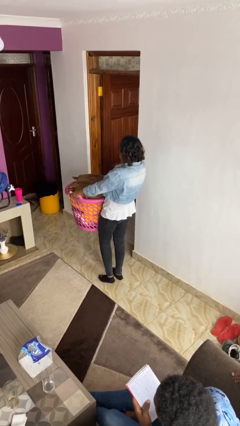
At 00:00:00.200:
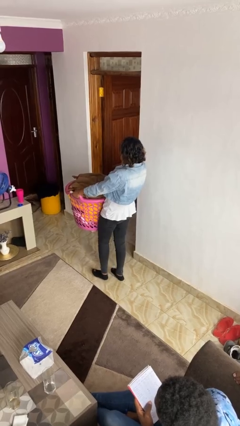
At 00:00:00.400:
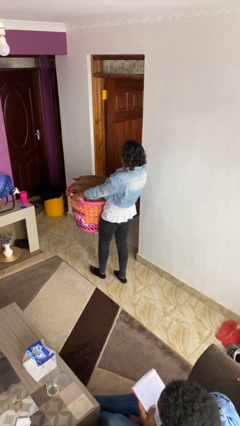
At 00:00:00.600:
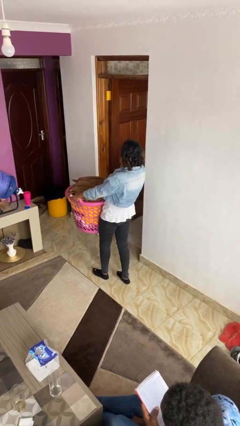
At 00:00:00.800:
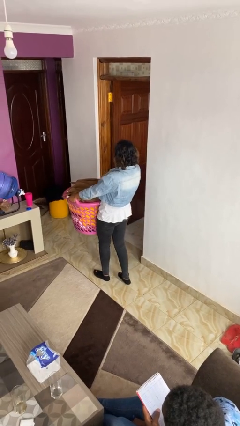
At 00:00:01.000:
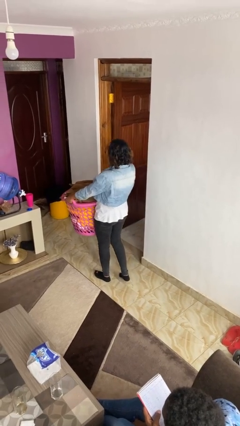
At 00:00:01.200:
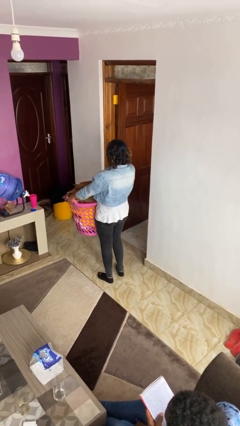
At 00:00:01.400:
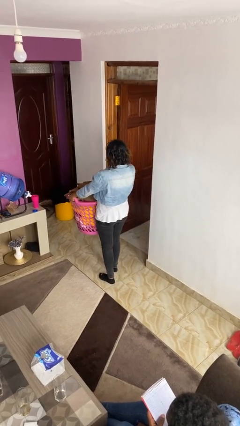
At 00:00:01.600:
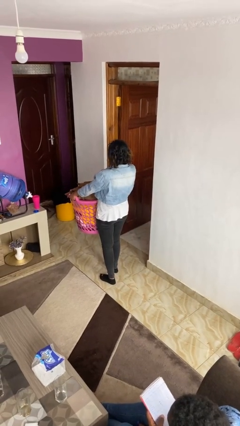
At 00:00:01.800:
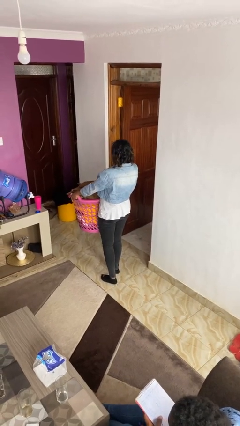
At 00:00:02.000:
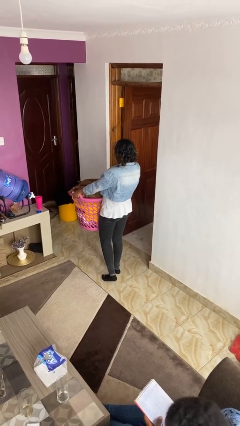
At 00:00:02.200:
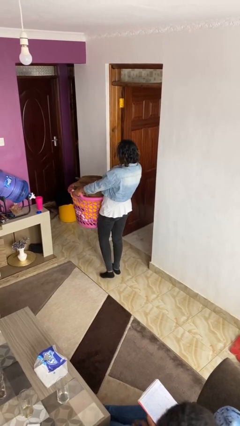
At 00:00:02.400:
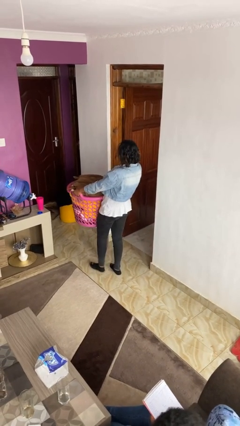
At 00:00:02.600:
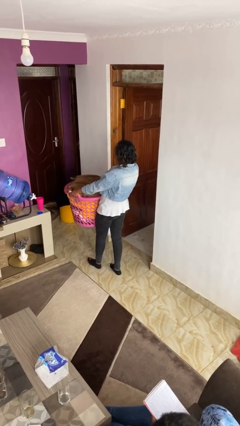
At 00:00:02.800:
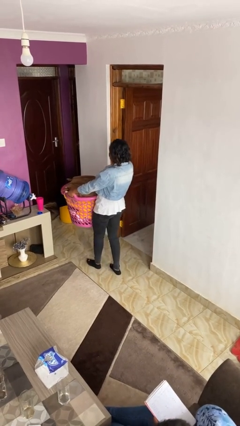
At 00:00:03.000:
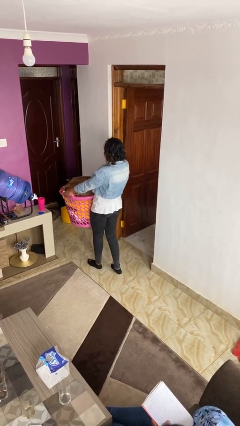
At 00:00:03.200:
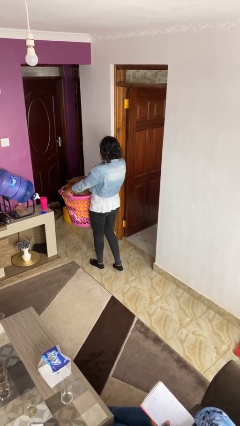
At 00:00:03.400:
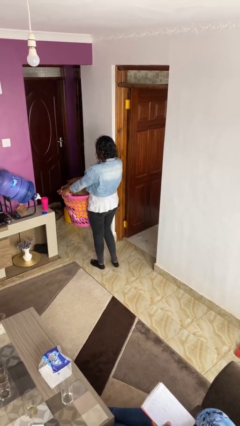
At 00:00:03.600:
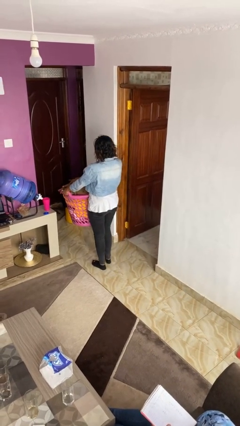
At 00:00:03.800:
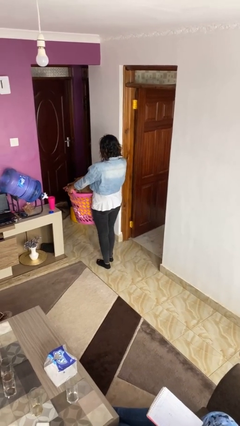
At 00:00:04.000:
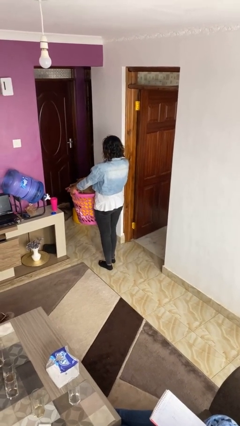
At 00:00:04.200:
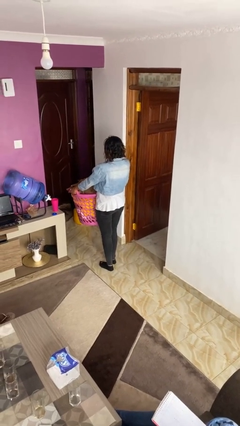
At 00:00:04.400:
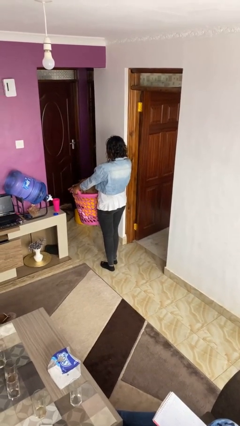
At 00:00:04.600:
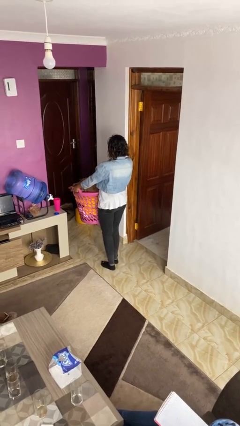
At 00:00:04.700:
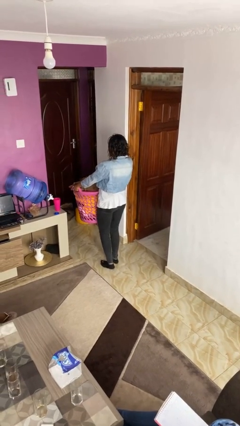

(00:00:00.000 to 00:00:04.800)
person carries laundry basket

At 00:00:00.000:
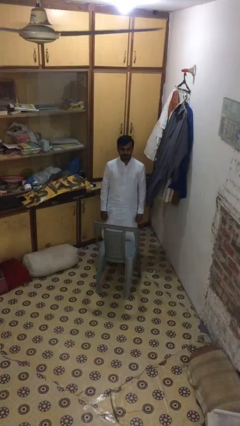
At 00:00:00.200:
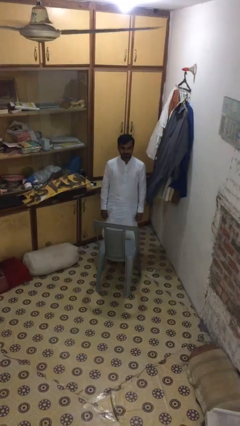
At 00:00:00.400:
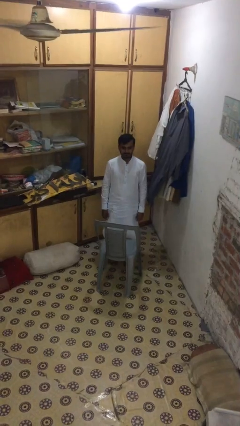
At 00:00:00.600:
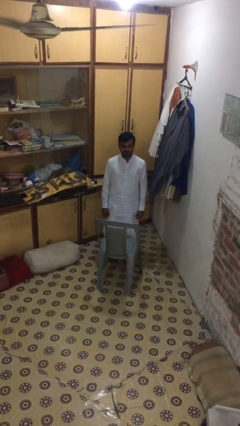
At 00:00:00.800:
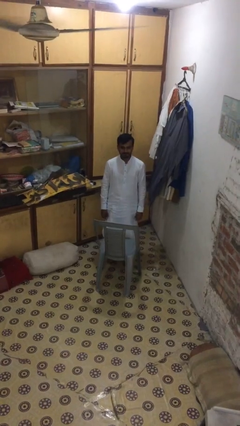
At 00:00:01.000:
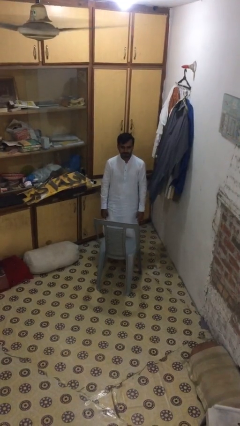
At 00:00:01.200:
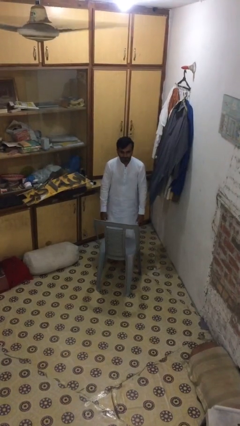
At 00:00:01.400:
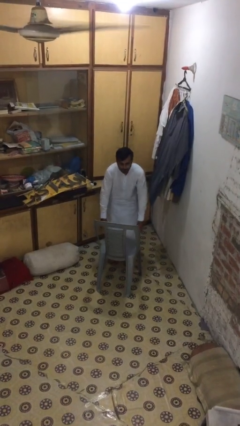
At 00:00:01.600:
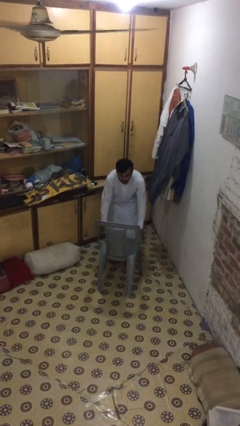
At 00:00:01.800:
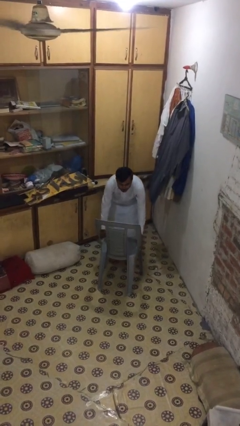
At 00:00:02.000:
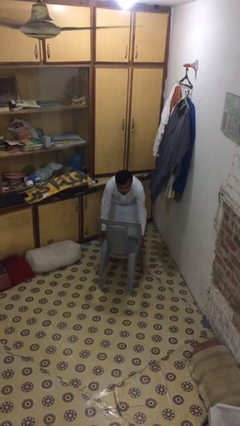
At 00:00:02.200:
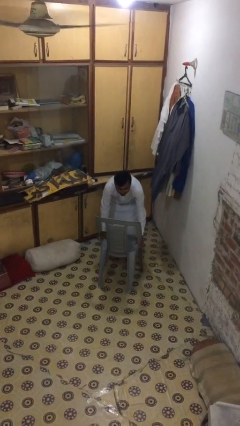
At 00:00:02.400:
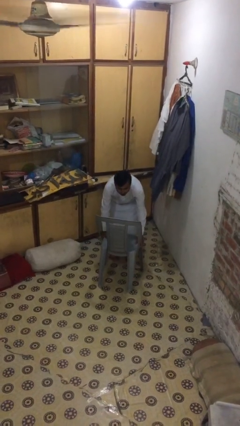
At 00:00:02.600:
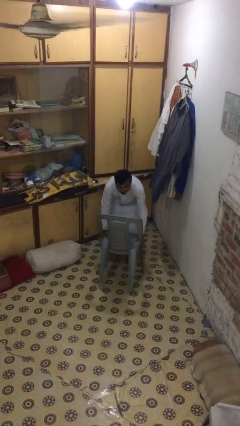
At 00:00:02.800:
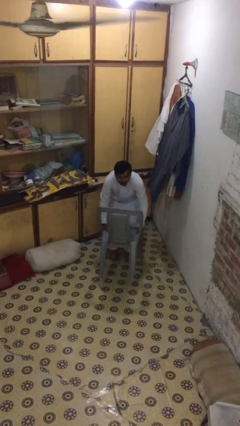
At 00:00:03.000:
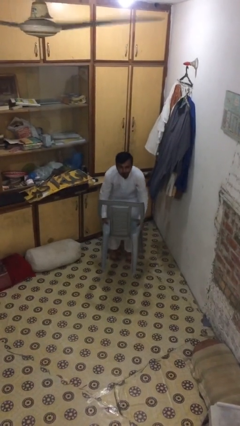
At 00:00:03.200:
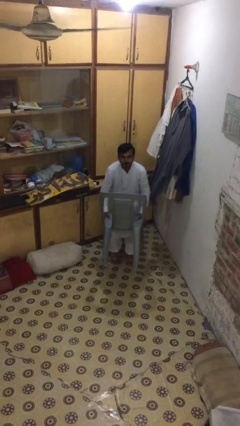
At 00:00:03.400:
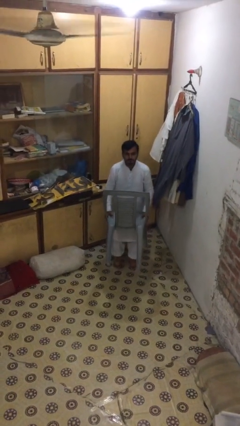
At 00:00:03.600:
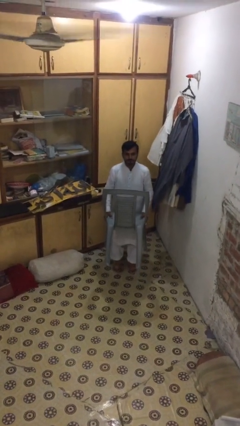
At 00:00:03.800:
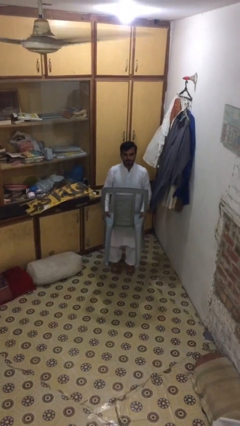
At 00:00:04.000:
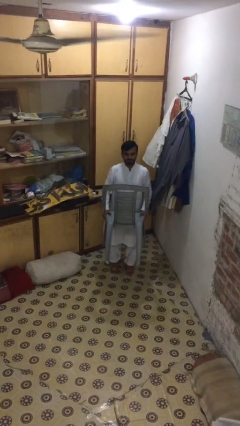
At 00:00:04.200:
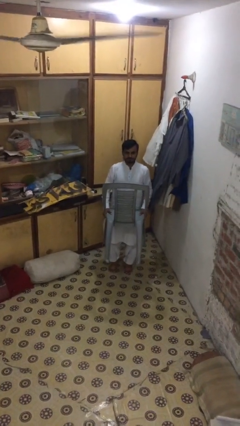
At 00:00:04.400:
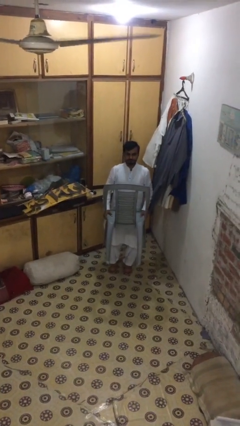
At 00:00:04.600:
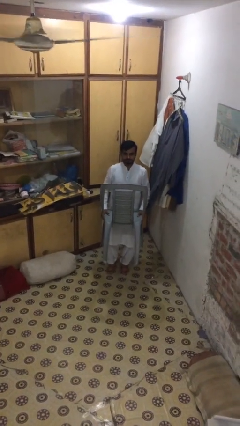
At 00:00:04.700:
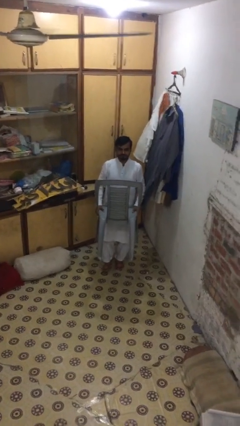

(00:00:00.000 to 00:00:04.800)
person picks up object from floor

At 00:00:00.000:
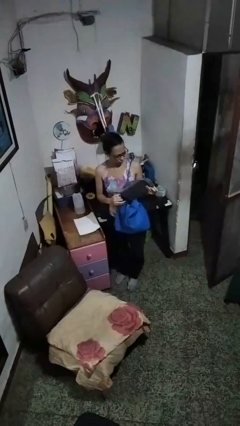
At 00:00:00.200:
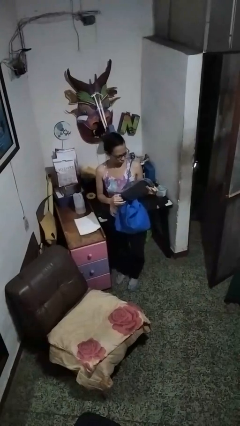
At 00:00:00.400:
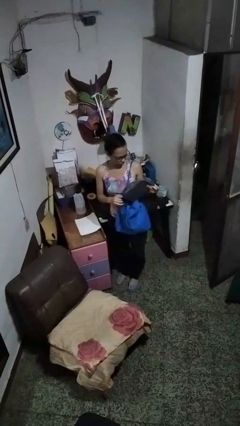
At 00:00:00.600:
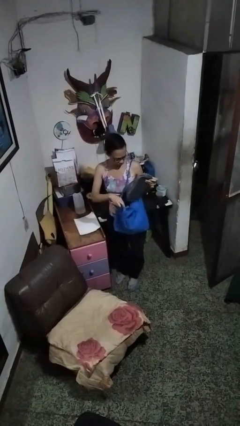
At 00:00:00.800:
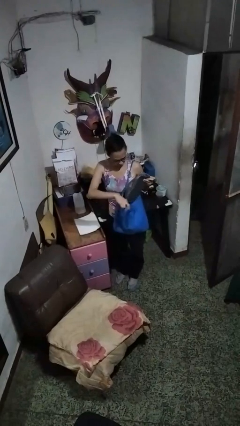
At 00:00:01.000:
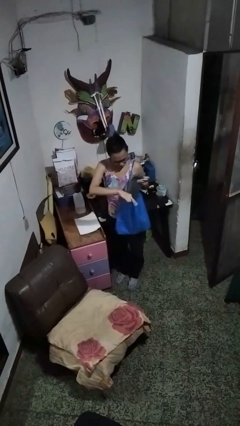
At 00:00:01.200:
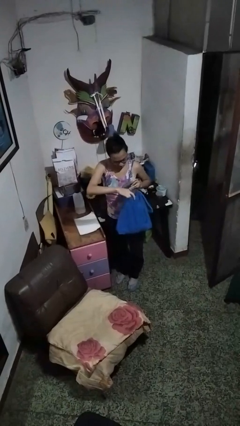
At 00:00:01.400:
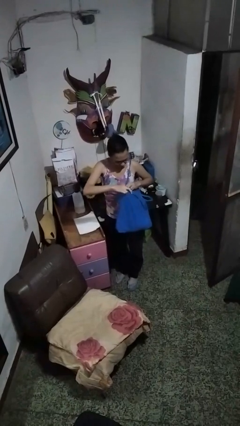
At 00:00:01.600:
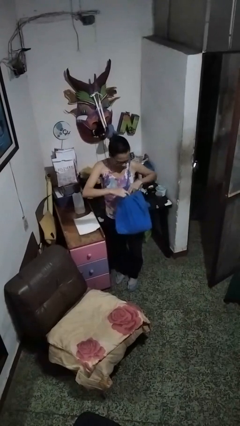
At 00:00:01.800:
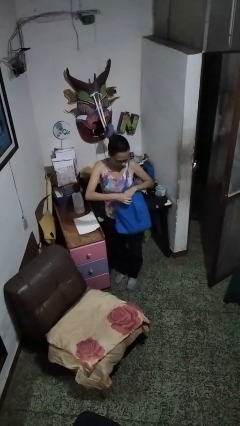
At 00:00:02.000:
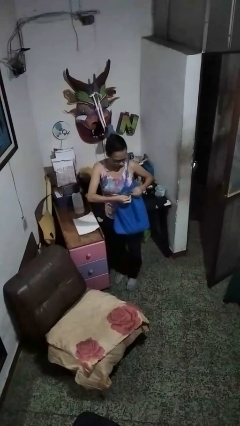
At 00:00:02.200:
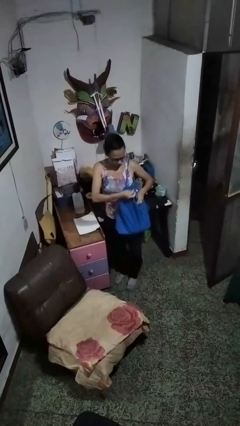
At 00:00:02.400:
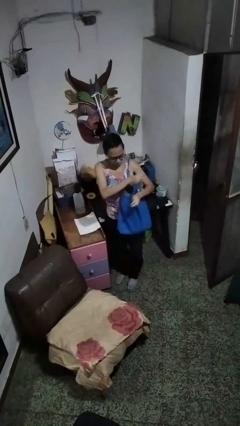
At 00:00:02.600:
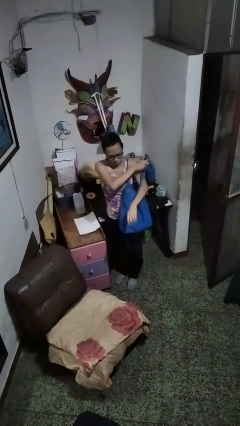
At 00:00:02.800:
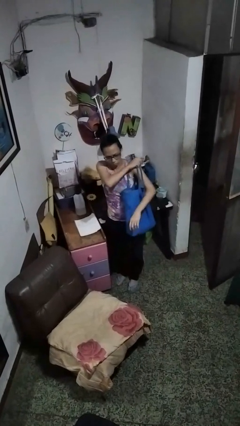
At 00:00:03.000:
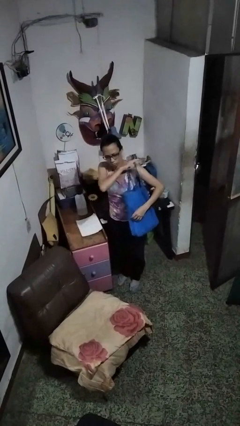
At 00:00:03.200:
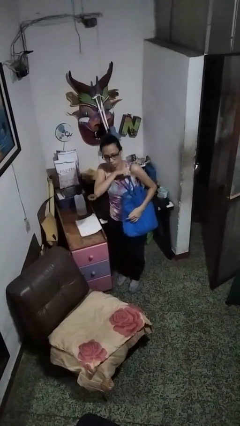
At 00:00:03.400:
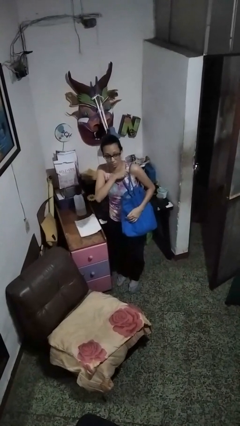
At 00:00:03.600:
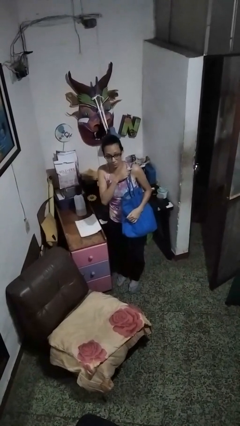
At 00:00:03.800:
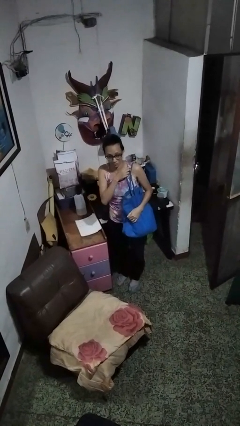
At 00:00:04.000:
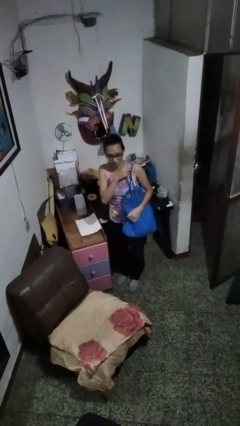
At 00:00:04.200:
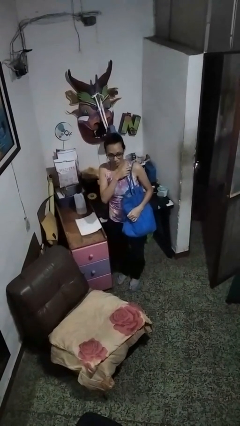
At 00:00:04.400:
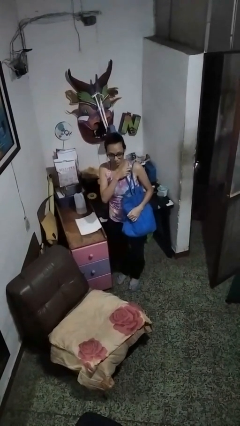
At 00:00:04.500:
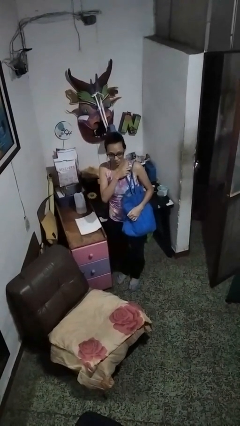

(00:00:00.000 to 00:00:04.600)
person puts object into bag

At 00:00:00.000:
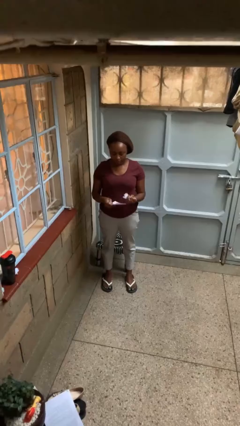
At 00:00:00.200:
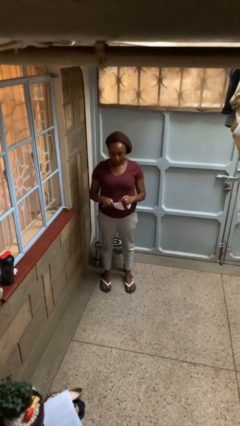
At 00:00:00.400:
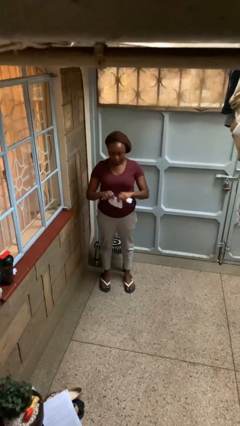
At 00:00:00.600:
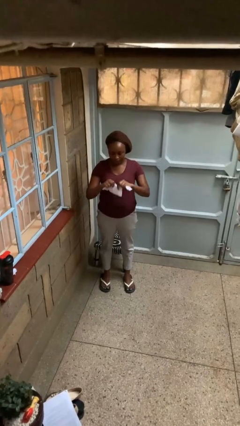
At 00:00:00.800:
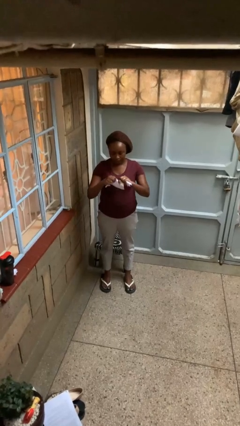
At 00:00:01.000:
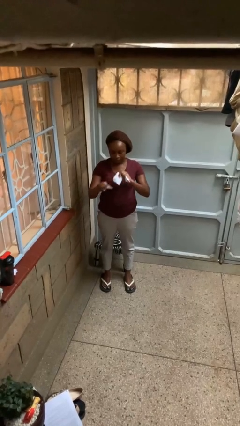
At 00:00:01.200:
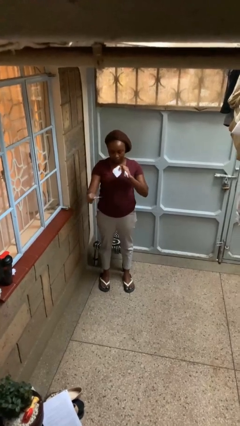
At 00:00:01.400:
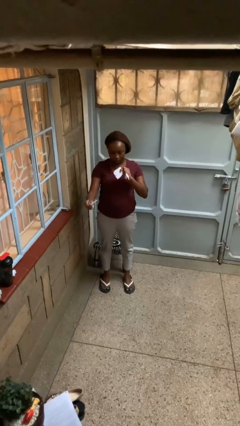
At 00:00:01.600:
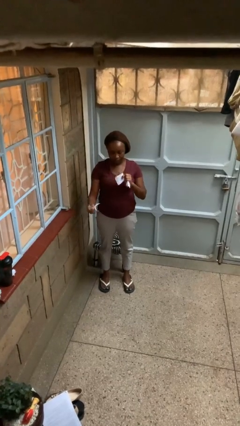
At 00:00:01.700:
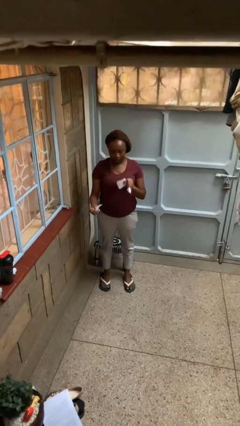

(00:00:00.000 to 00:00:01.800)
person tears paper

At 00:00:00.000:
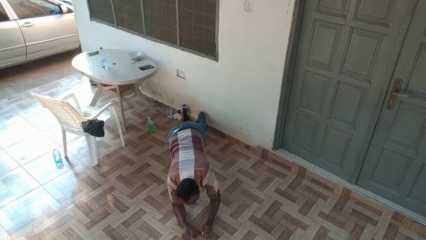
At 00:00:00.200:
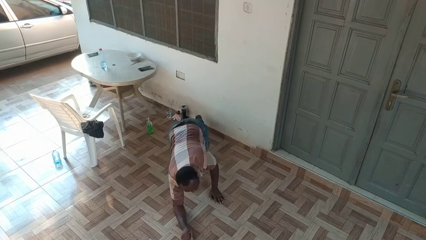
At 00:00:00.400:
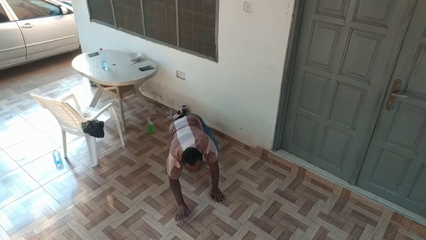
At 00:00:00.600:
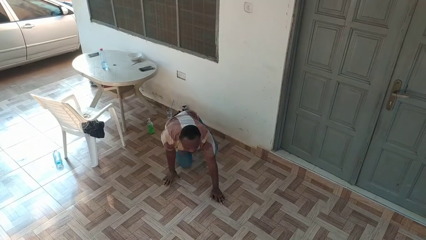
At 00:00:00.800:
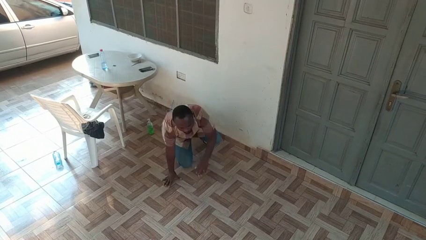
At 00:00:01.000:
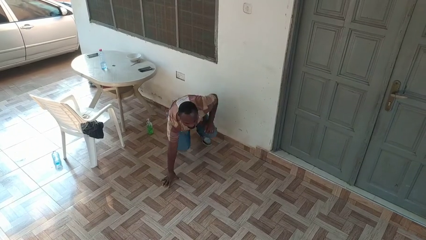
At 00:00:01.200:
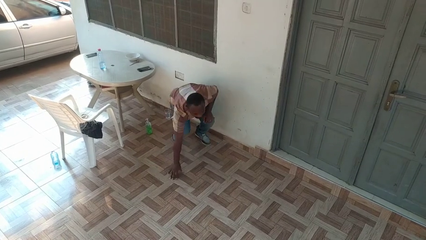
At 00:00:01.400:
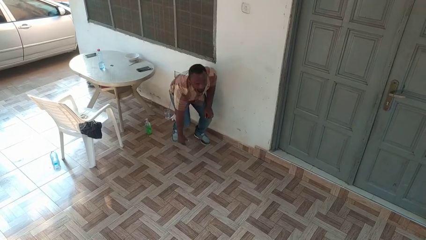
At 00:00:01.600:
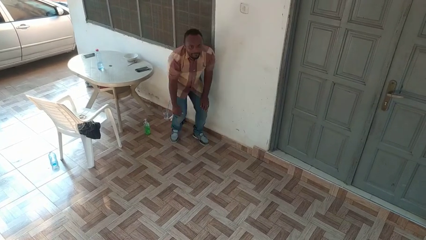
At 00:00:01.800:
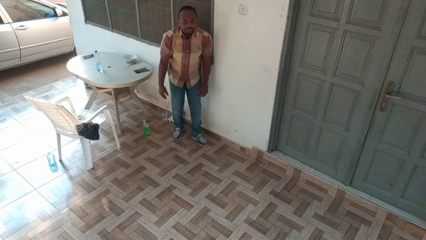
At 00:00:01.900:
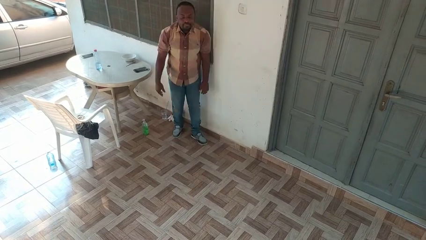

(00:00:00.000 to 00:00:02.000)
person stands up from floor
